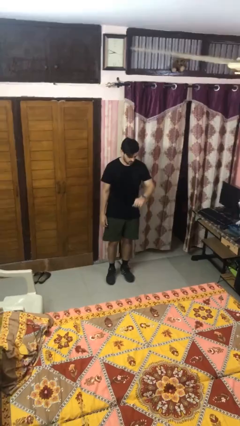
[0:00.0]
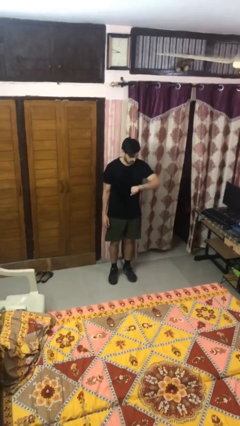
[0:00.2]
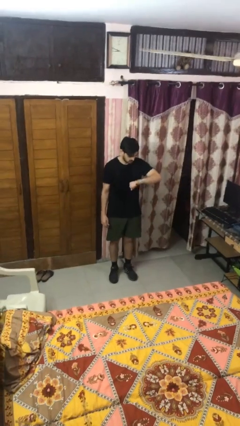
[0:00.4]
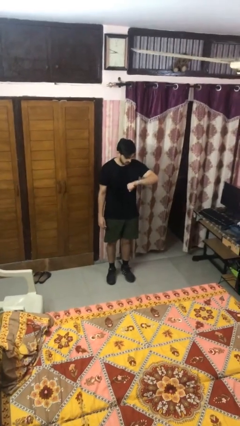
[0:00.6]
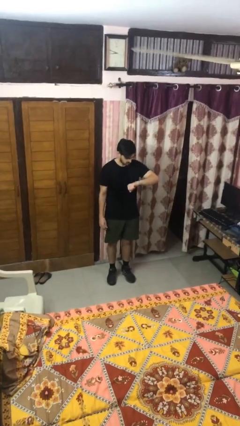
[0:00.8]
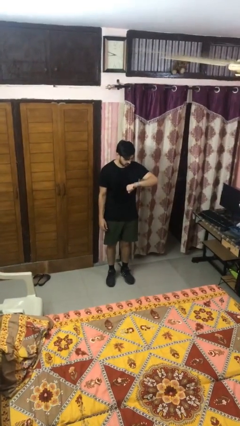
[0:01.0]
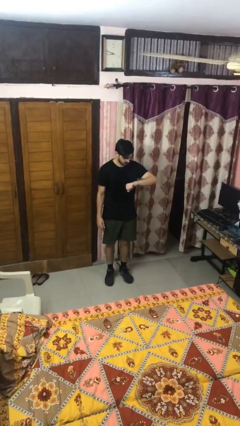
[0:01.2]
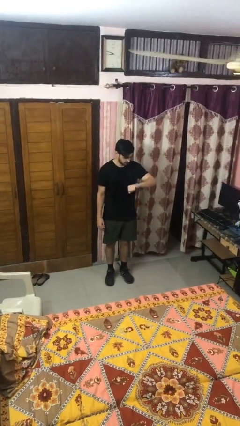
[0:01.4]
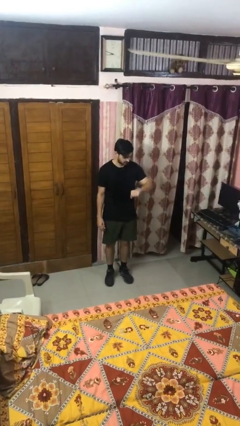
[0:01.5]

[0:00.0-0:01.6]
person looks at wristwatch

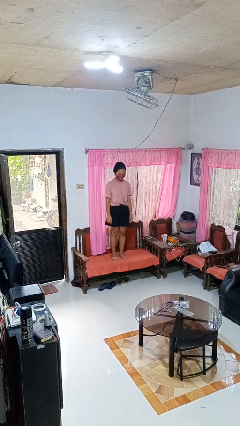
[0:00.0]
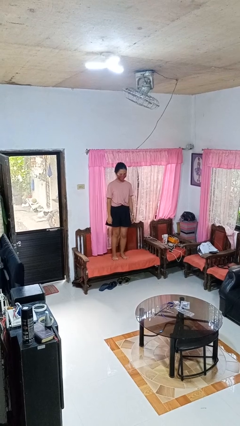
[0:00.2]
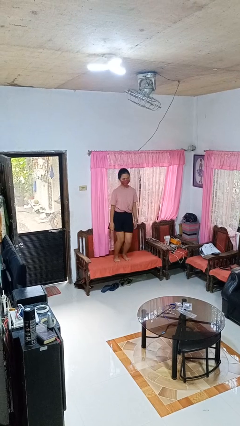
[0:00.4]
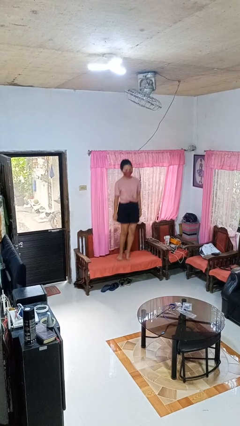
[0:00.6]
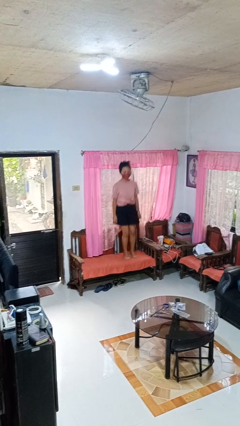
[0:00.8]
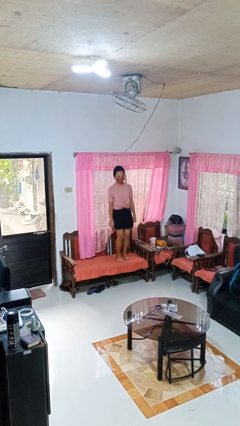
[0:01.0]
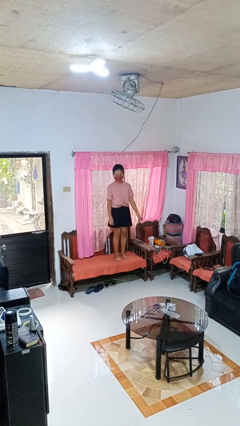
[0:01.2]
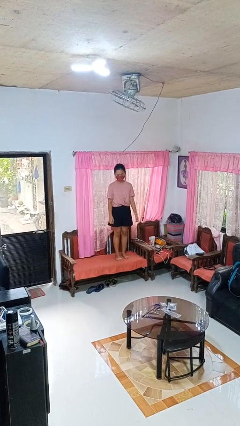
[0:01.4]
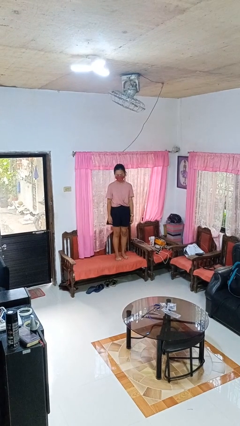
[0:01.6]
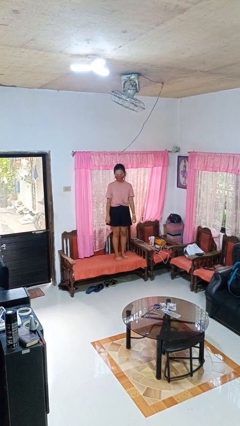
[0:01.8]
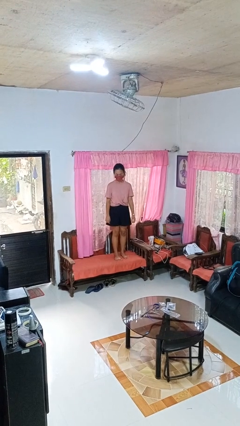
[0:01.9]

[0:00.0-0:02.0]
person jumps on couch

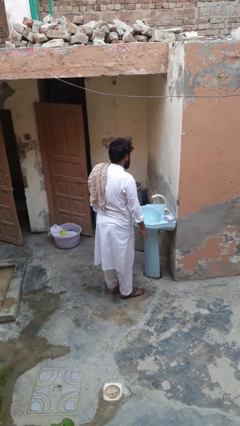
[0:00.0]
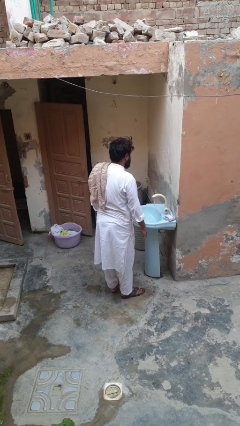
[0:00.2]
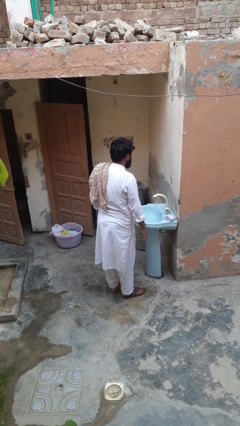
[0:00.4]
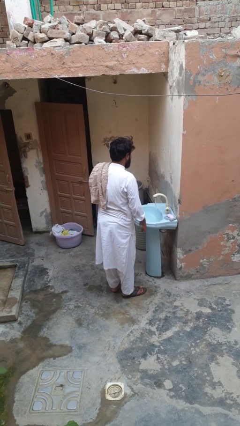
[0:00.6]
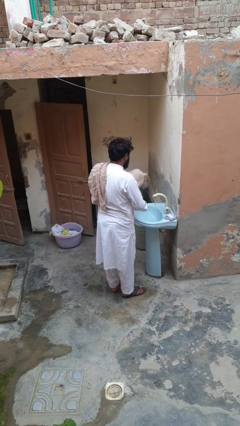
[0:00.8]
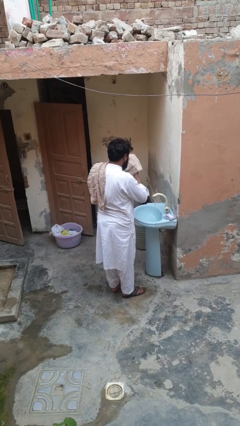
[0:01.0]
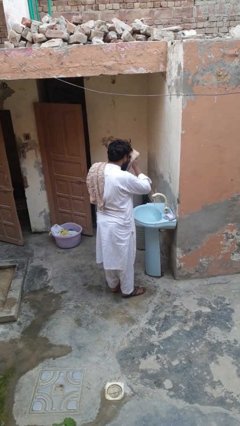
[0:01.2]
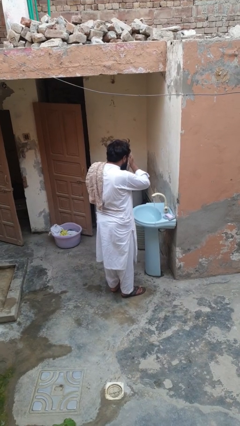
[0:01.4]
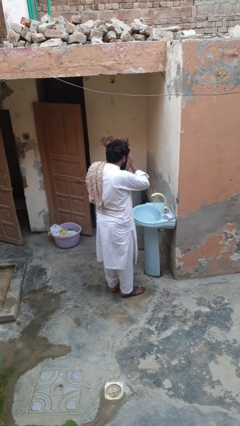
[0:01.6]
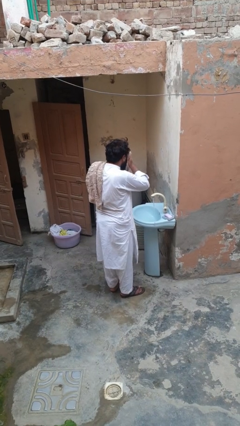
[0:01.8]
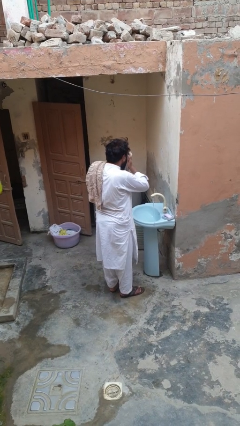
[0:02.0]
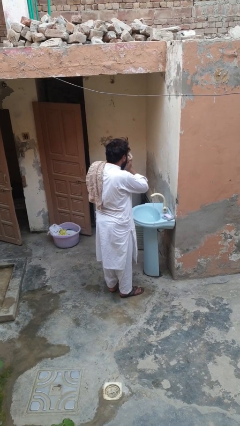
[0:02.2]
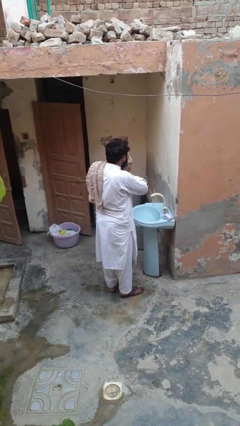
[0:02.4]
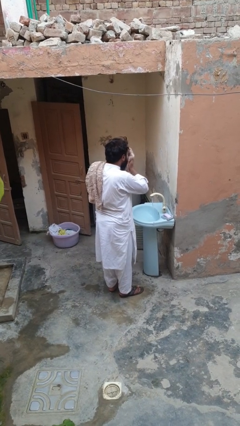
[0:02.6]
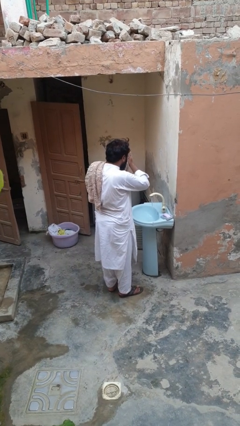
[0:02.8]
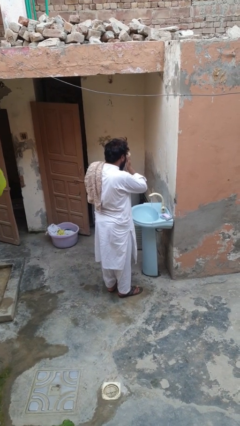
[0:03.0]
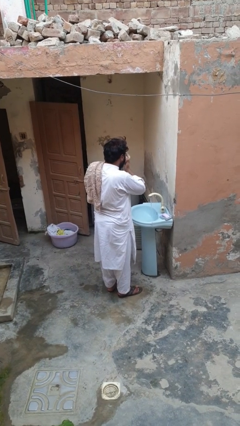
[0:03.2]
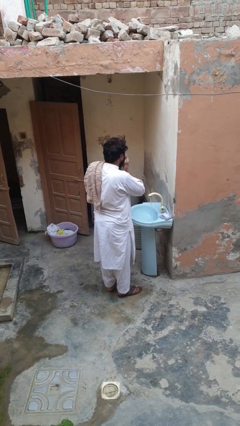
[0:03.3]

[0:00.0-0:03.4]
person dries face with towel

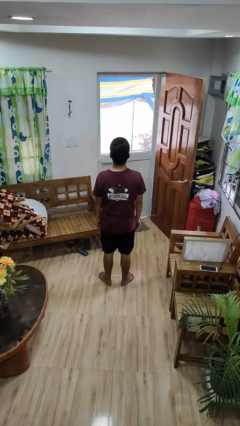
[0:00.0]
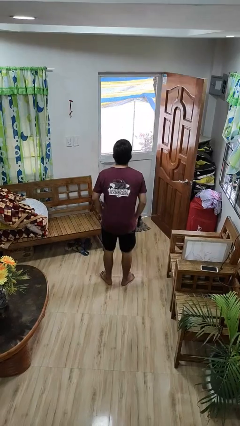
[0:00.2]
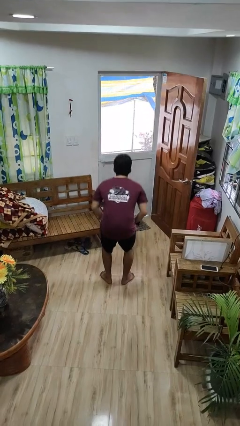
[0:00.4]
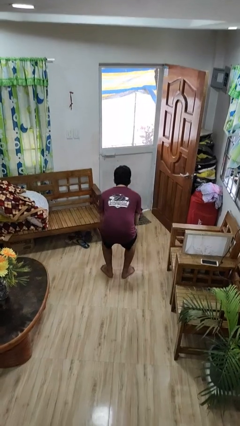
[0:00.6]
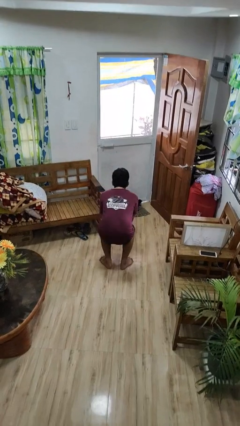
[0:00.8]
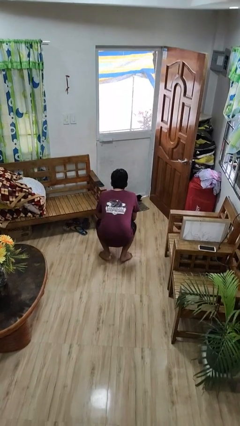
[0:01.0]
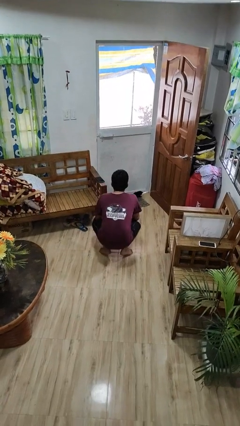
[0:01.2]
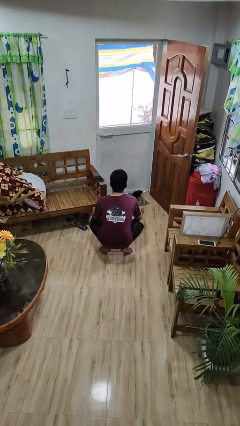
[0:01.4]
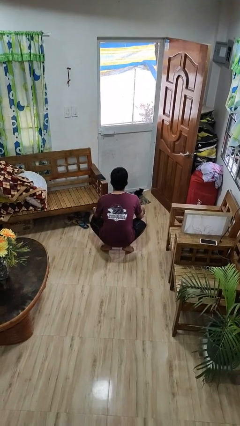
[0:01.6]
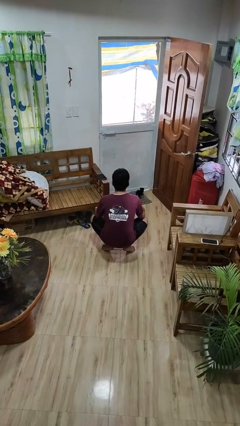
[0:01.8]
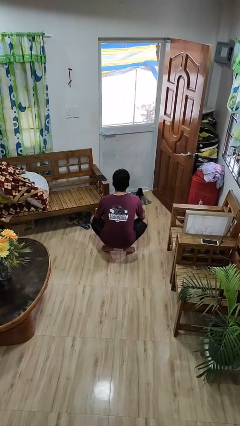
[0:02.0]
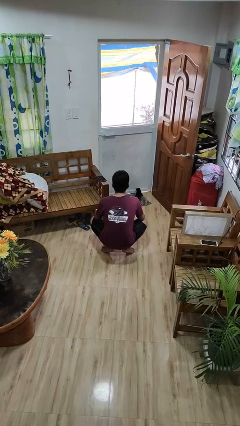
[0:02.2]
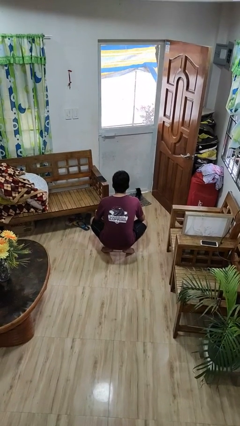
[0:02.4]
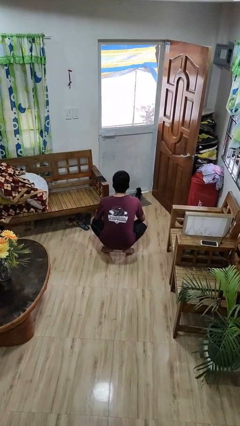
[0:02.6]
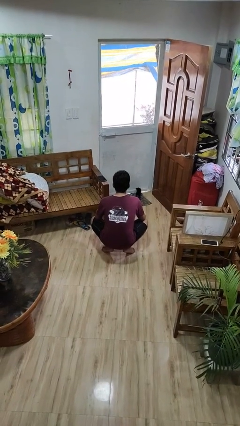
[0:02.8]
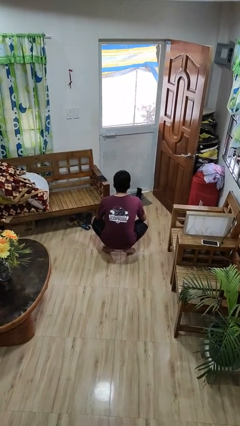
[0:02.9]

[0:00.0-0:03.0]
person squats

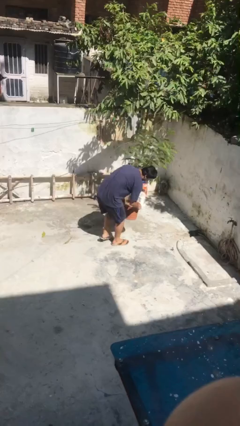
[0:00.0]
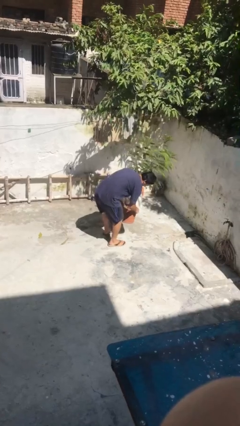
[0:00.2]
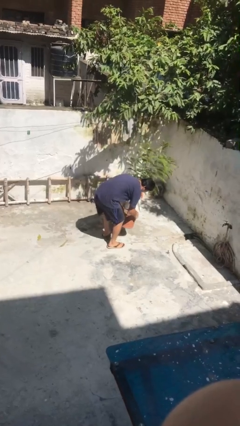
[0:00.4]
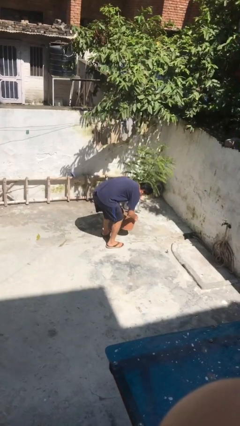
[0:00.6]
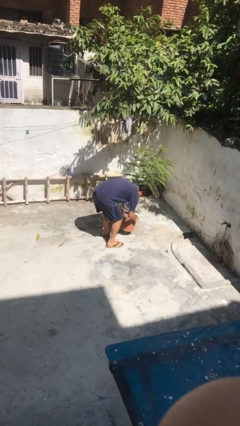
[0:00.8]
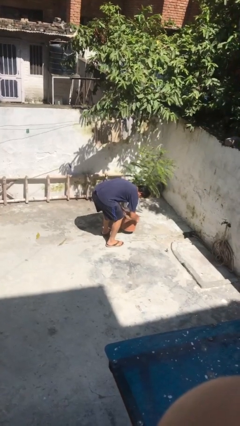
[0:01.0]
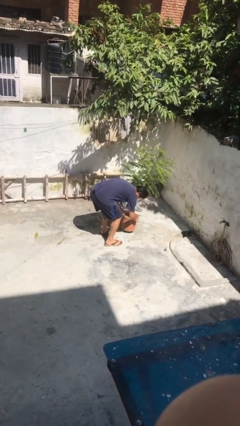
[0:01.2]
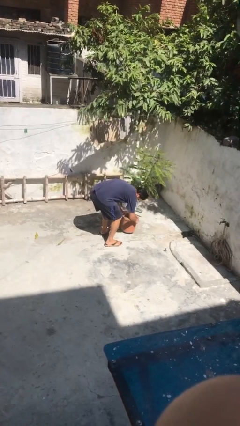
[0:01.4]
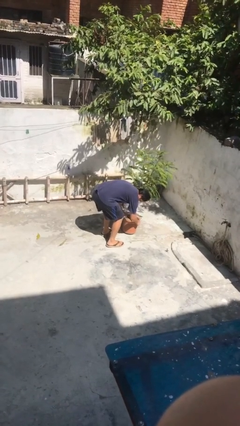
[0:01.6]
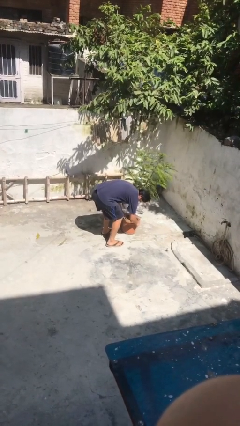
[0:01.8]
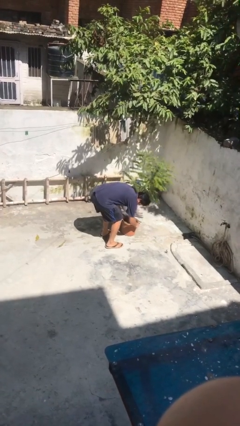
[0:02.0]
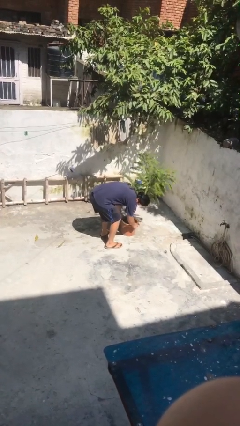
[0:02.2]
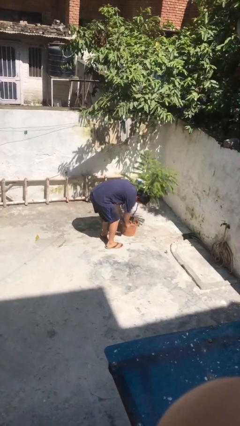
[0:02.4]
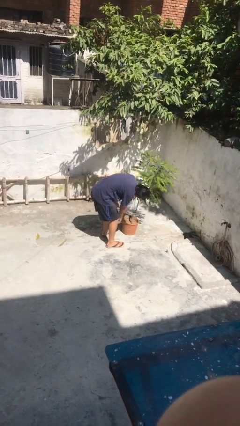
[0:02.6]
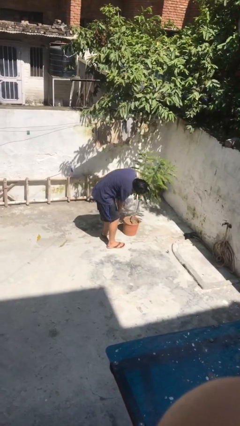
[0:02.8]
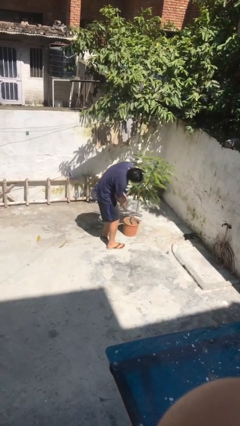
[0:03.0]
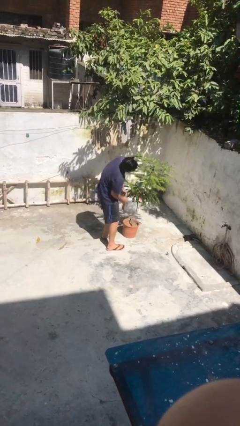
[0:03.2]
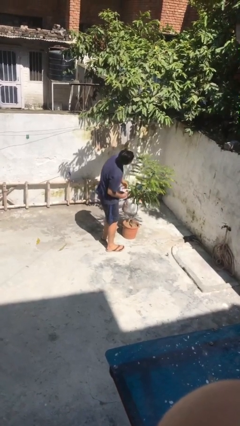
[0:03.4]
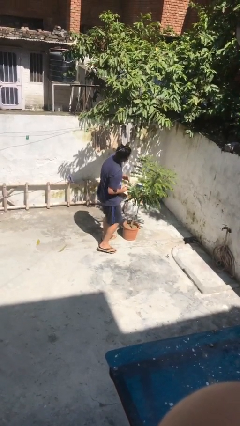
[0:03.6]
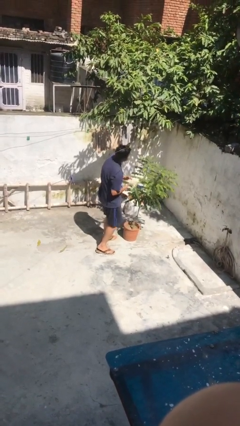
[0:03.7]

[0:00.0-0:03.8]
person puts down object on floor

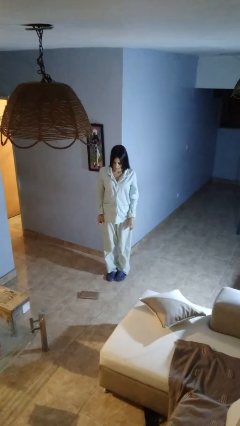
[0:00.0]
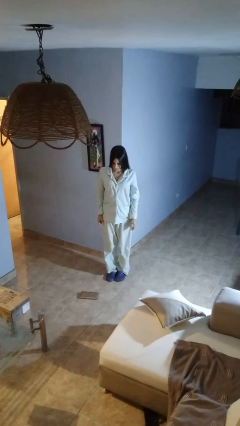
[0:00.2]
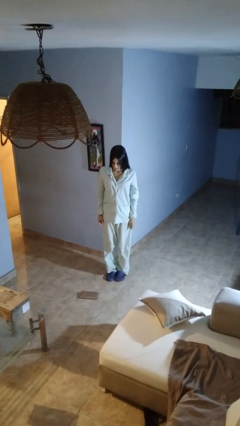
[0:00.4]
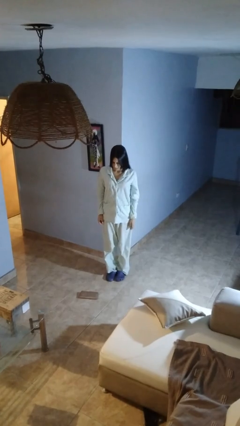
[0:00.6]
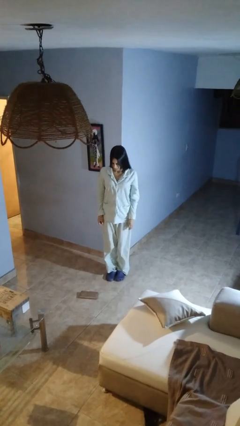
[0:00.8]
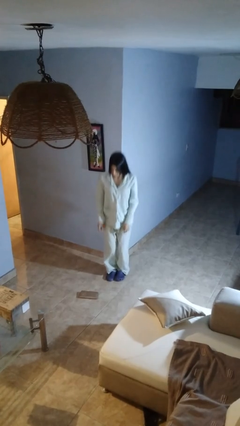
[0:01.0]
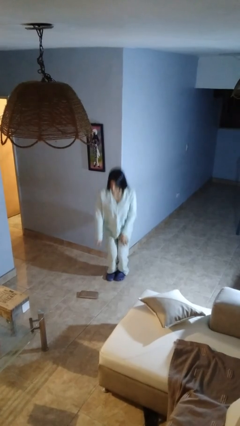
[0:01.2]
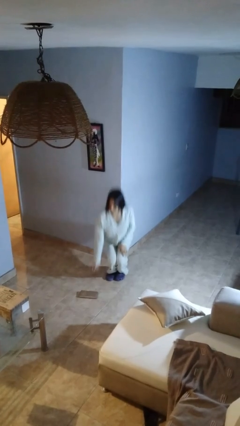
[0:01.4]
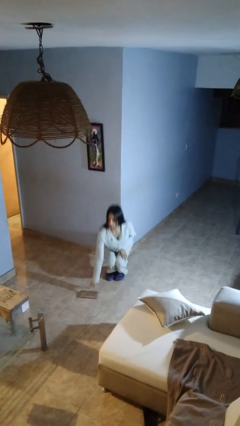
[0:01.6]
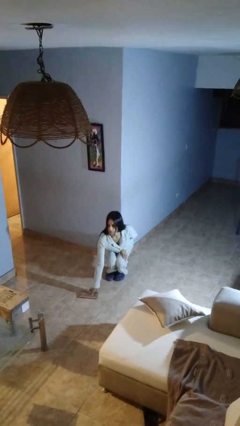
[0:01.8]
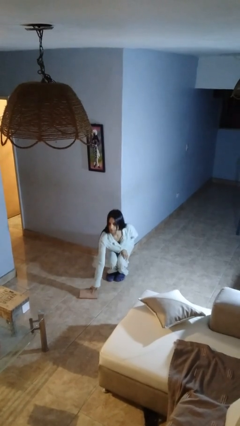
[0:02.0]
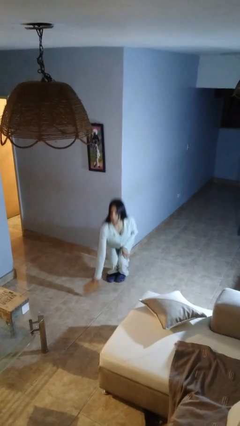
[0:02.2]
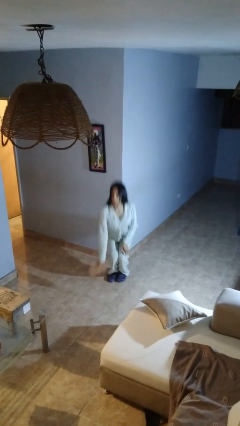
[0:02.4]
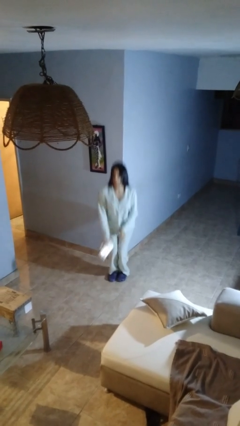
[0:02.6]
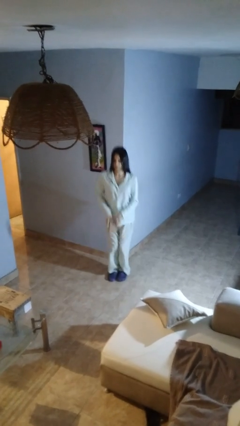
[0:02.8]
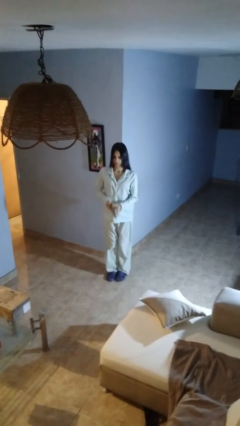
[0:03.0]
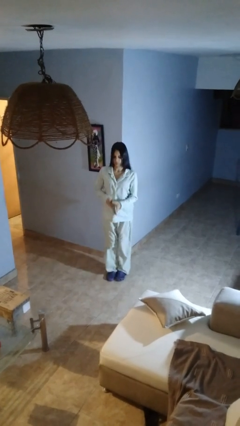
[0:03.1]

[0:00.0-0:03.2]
person picks up object from floor

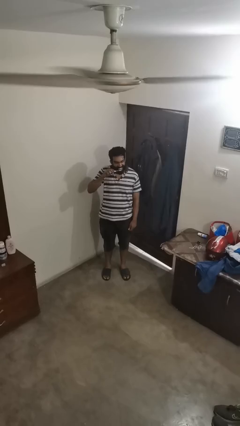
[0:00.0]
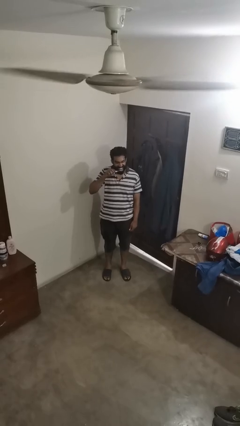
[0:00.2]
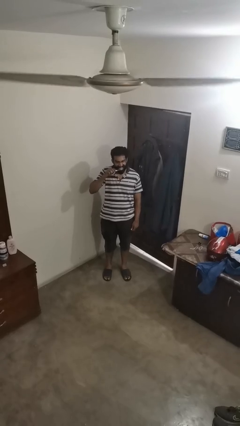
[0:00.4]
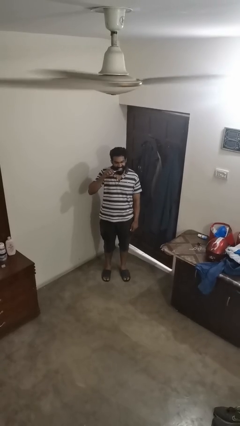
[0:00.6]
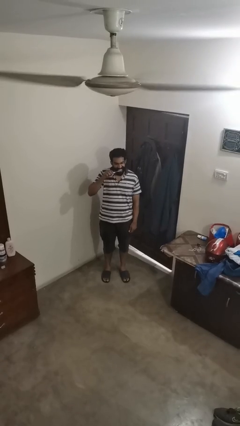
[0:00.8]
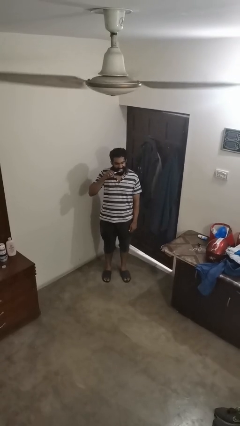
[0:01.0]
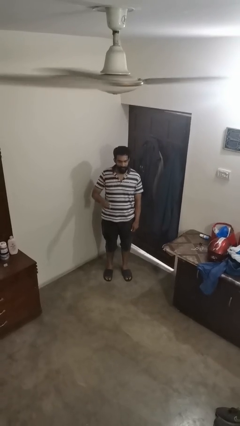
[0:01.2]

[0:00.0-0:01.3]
person brushes teeth
